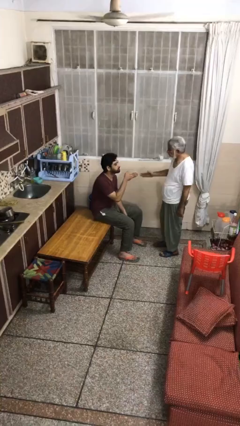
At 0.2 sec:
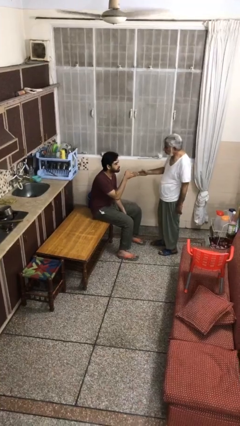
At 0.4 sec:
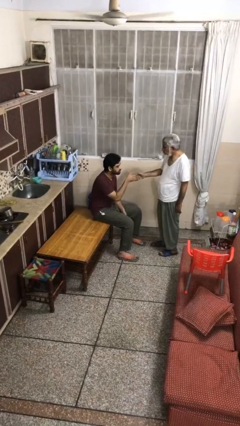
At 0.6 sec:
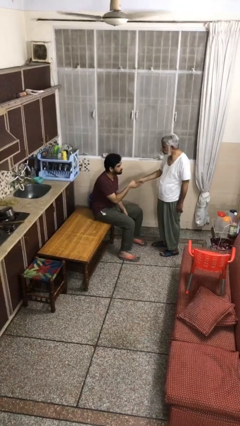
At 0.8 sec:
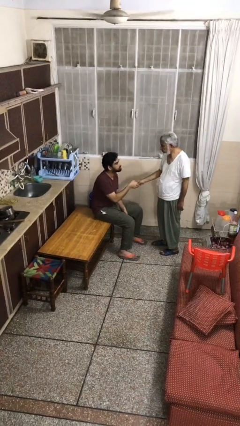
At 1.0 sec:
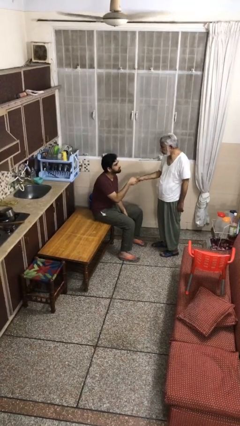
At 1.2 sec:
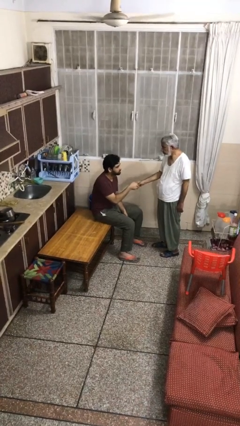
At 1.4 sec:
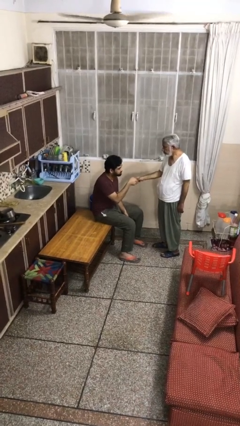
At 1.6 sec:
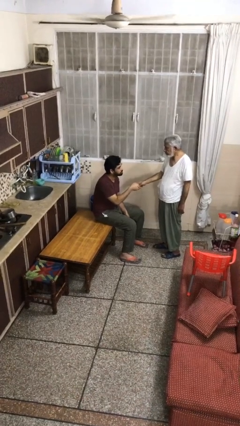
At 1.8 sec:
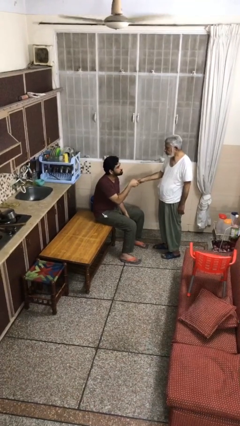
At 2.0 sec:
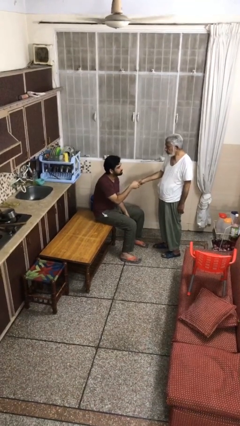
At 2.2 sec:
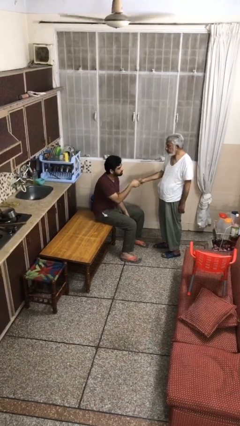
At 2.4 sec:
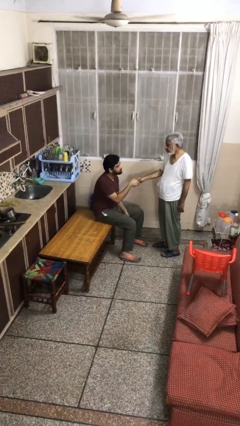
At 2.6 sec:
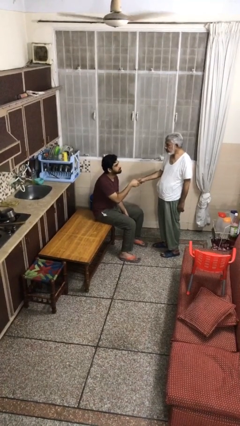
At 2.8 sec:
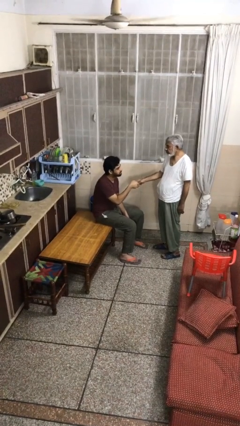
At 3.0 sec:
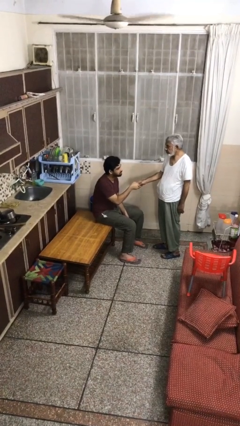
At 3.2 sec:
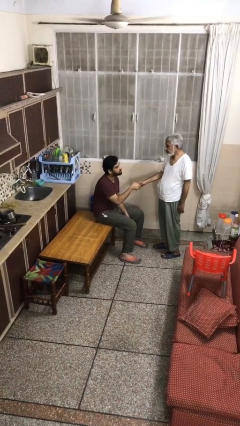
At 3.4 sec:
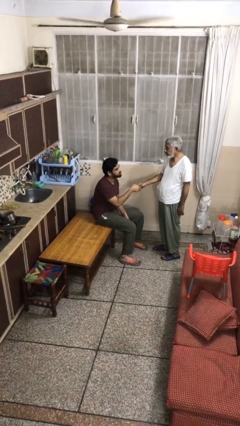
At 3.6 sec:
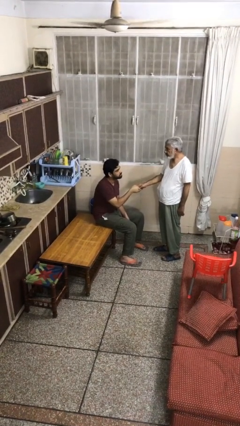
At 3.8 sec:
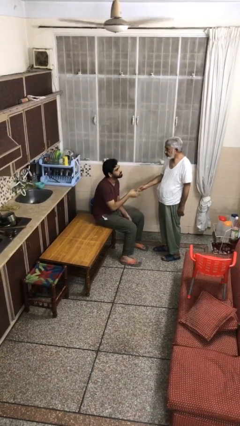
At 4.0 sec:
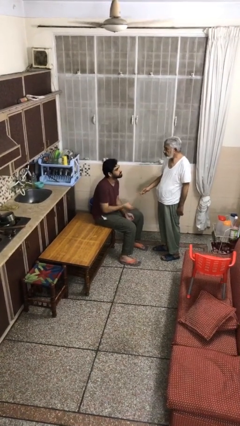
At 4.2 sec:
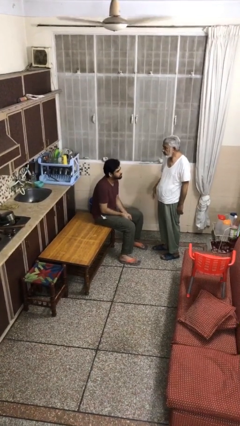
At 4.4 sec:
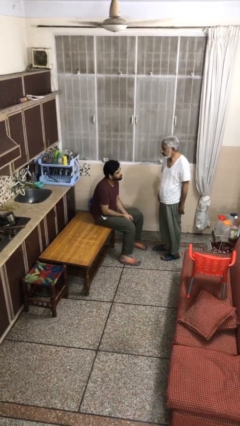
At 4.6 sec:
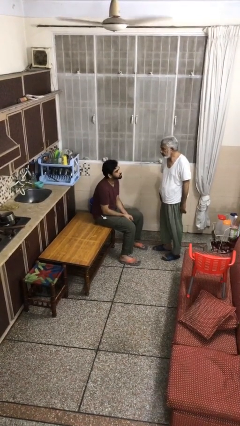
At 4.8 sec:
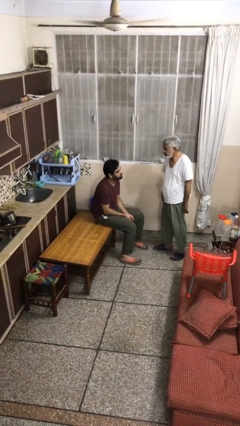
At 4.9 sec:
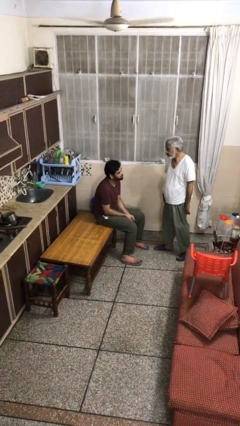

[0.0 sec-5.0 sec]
person shakes hand

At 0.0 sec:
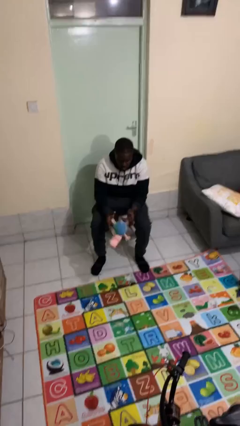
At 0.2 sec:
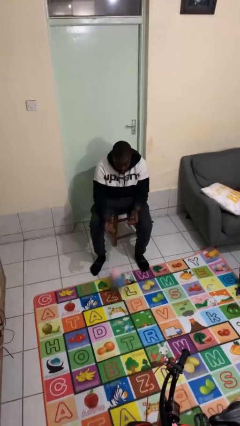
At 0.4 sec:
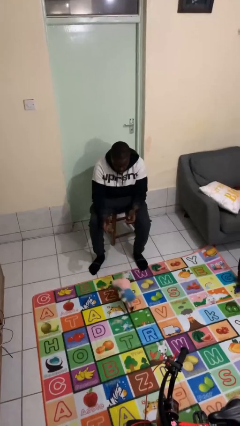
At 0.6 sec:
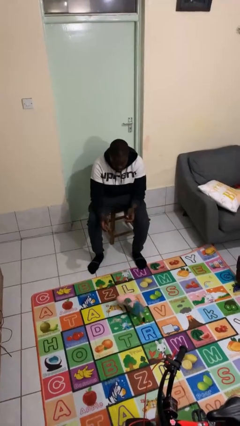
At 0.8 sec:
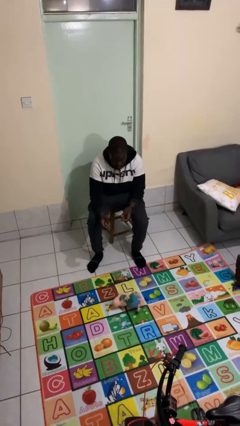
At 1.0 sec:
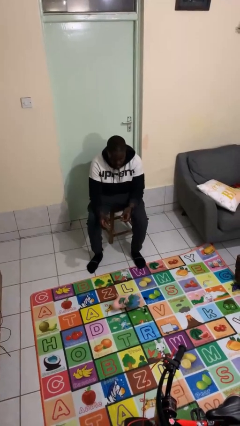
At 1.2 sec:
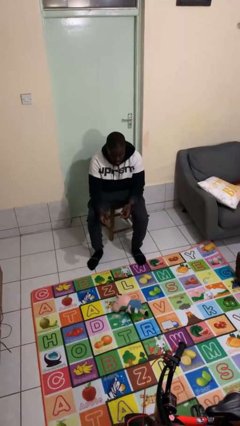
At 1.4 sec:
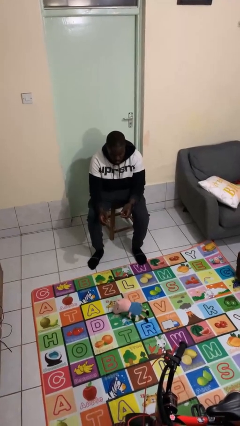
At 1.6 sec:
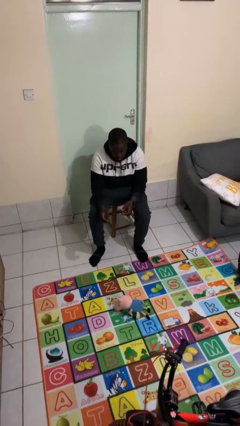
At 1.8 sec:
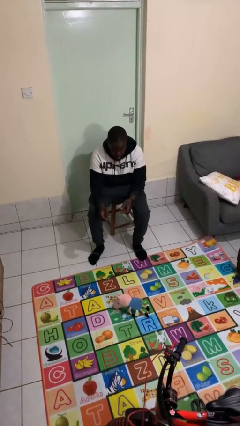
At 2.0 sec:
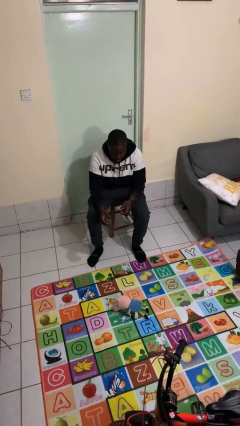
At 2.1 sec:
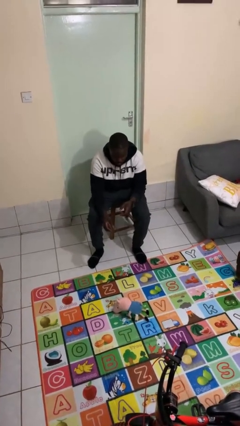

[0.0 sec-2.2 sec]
person drops object

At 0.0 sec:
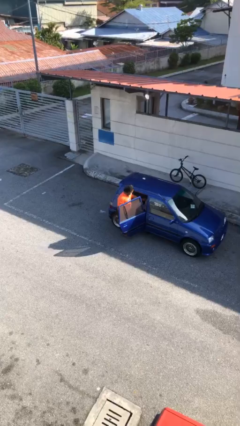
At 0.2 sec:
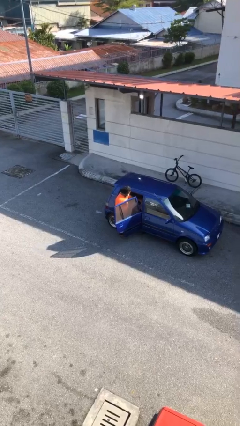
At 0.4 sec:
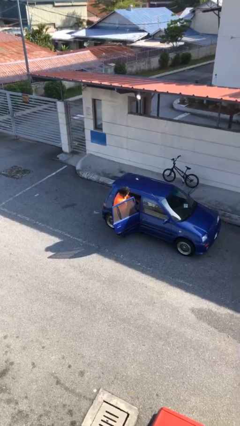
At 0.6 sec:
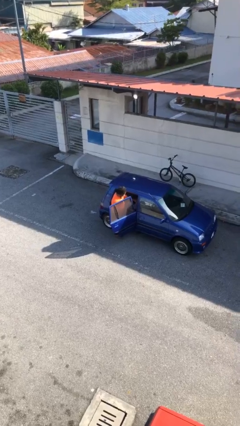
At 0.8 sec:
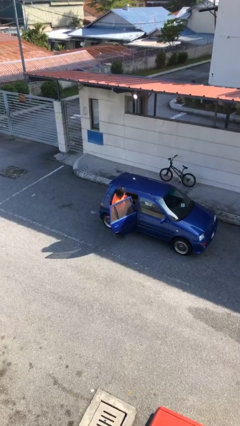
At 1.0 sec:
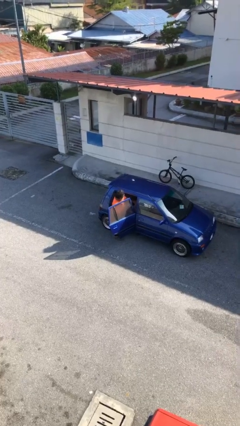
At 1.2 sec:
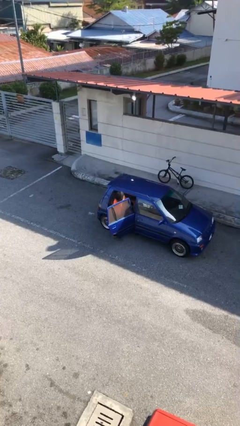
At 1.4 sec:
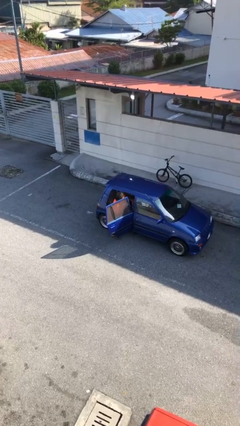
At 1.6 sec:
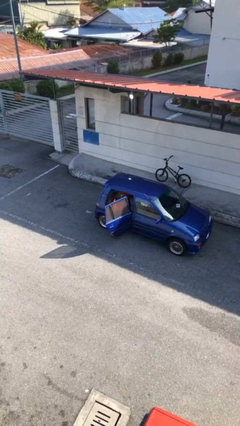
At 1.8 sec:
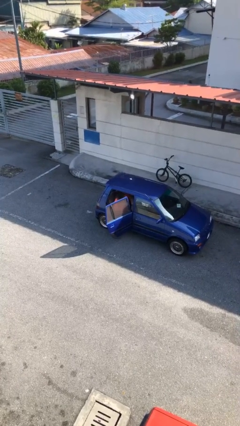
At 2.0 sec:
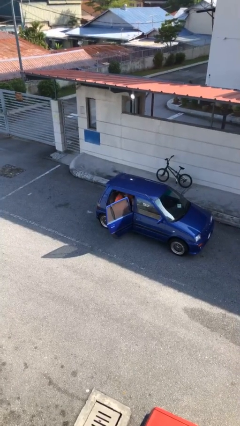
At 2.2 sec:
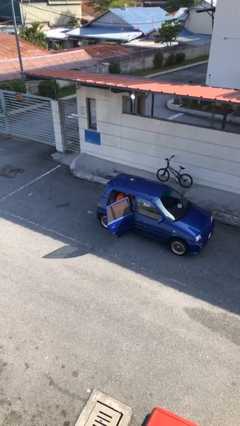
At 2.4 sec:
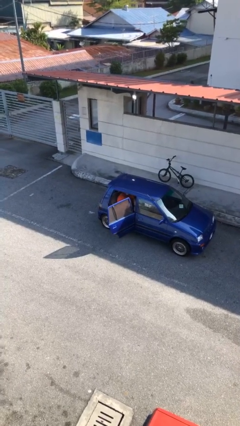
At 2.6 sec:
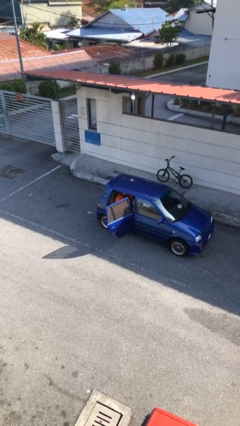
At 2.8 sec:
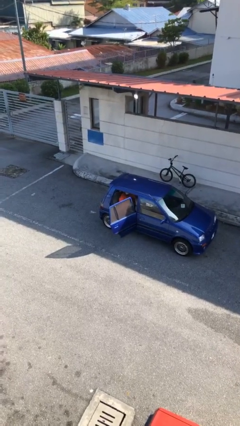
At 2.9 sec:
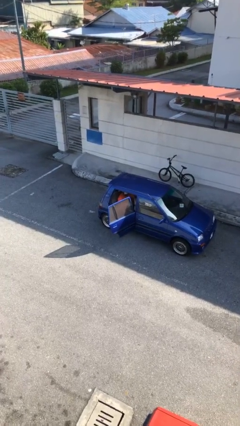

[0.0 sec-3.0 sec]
person enters car

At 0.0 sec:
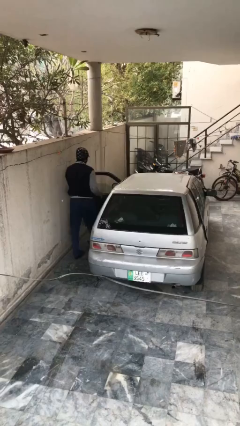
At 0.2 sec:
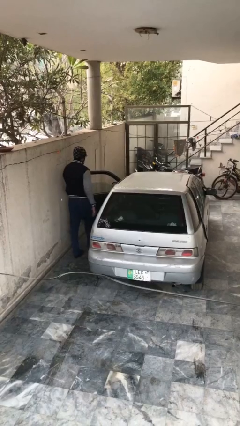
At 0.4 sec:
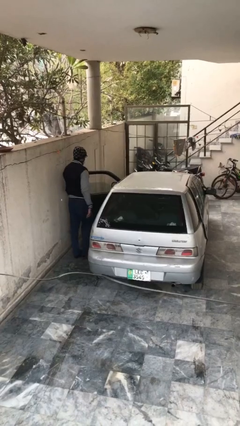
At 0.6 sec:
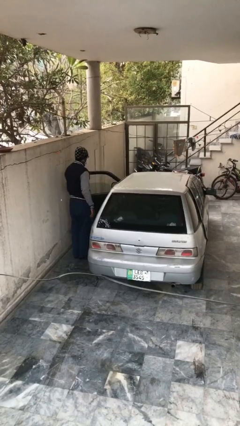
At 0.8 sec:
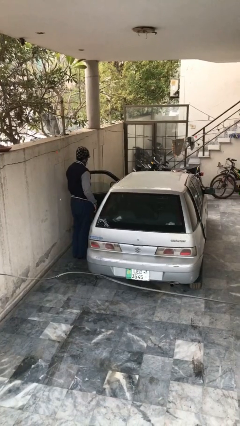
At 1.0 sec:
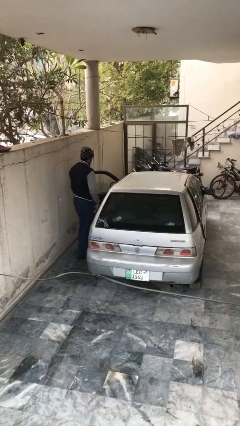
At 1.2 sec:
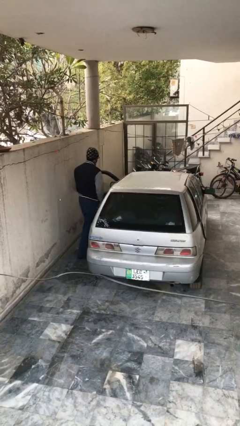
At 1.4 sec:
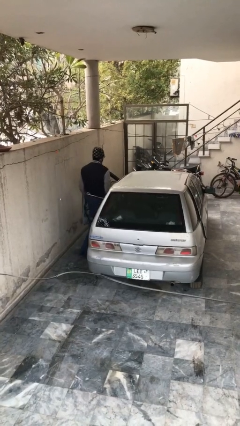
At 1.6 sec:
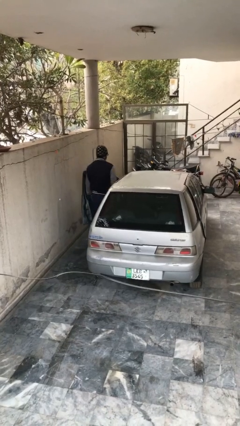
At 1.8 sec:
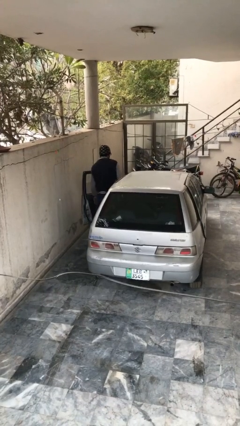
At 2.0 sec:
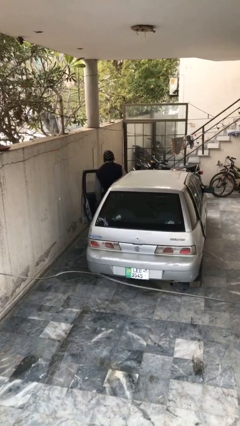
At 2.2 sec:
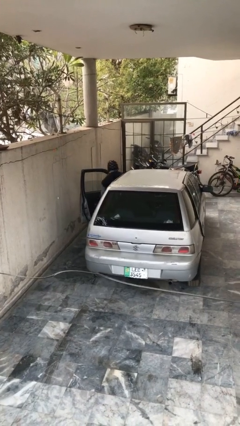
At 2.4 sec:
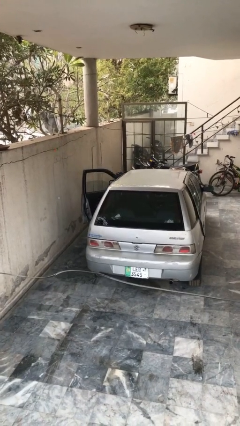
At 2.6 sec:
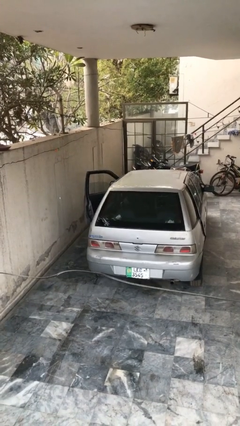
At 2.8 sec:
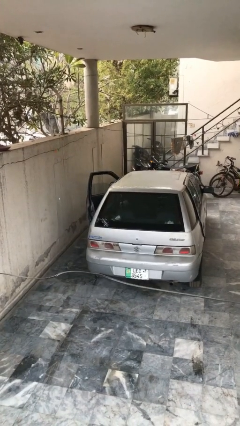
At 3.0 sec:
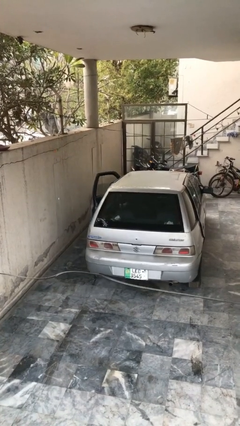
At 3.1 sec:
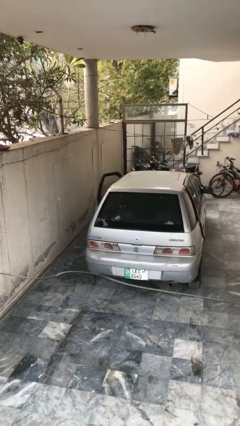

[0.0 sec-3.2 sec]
car picks up person

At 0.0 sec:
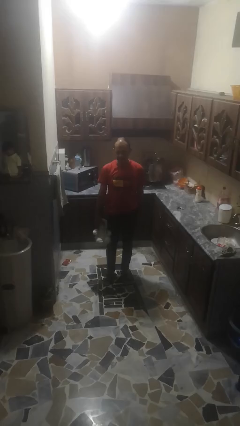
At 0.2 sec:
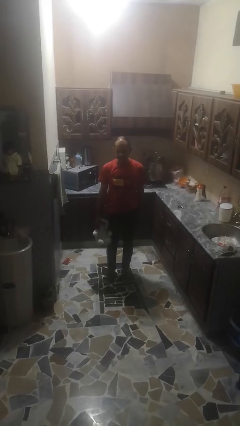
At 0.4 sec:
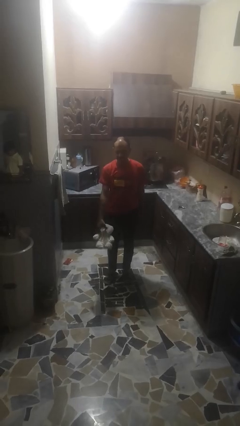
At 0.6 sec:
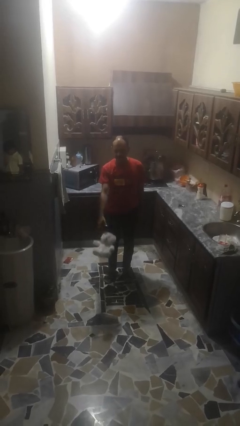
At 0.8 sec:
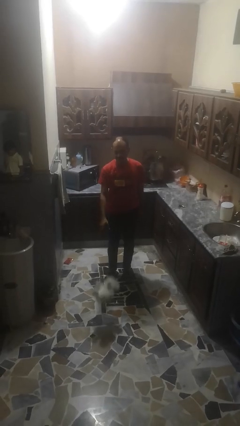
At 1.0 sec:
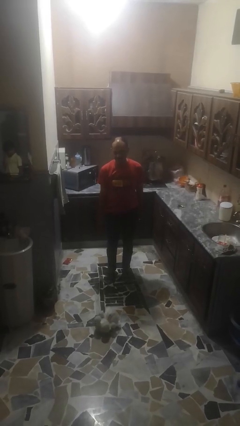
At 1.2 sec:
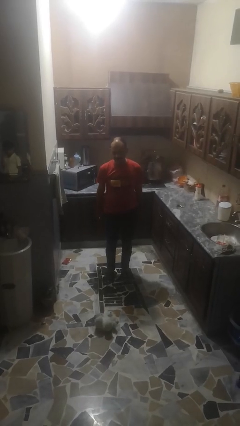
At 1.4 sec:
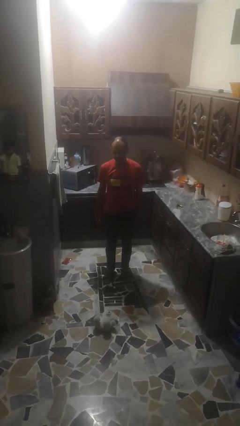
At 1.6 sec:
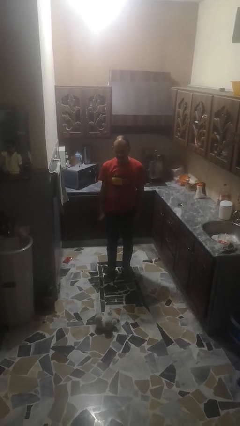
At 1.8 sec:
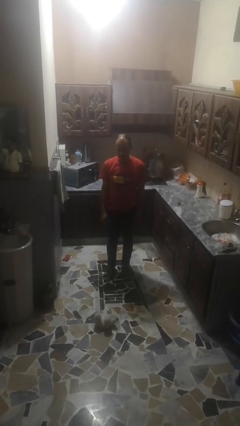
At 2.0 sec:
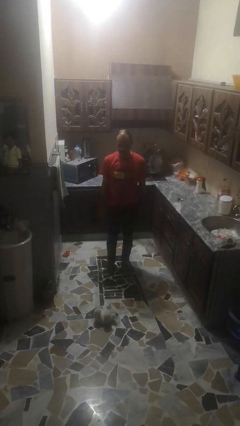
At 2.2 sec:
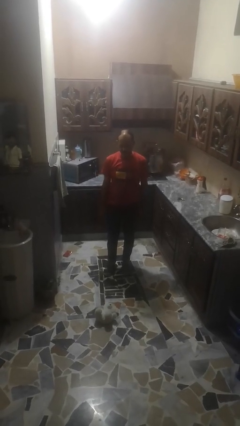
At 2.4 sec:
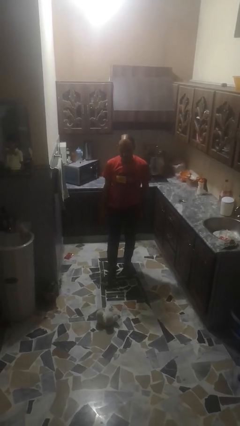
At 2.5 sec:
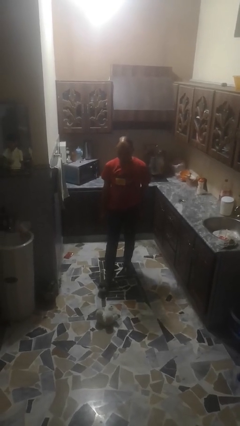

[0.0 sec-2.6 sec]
person throws object to ground

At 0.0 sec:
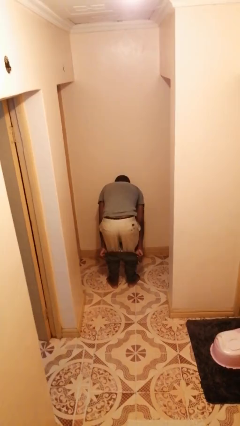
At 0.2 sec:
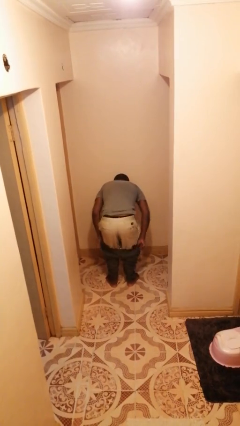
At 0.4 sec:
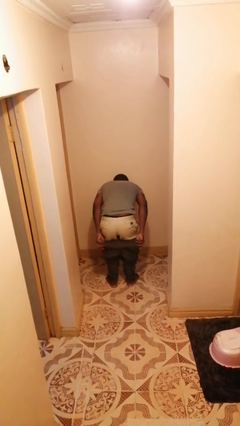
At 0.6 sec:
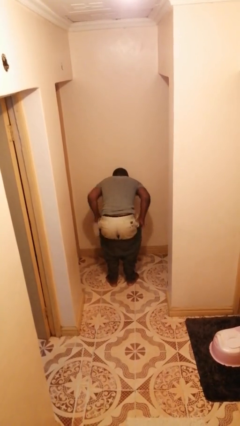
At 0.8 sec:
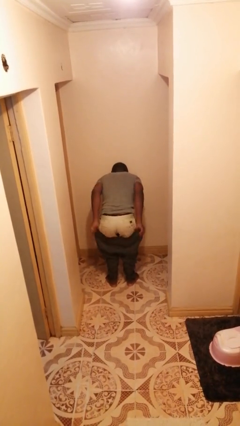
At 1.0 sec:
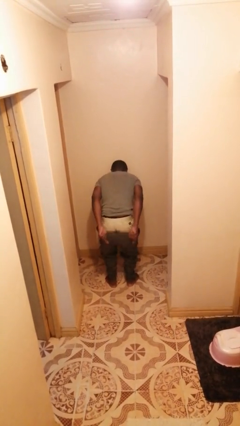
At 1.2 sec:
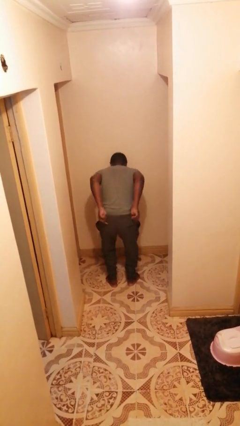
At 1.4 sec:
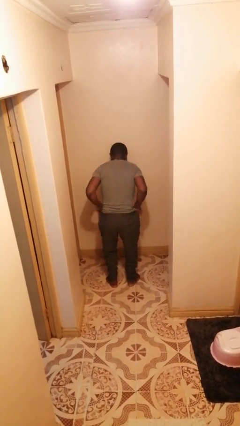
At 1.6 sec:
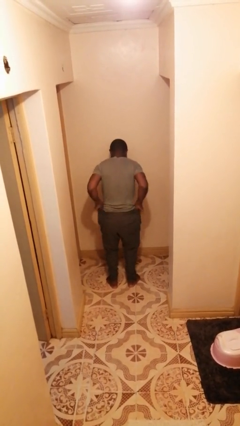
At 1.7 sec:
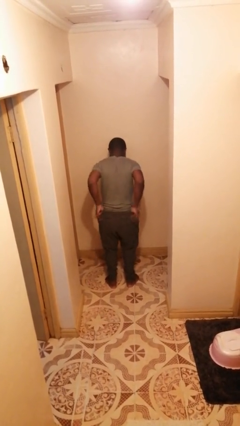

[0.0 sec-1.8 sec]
person puts on pants
